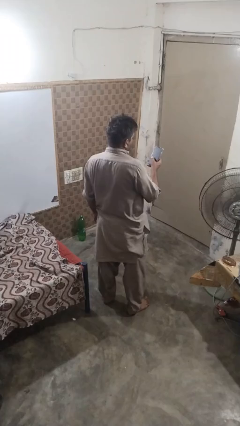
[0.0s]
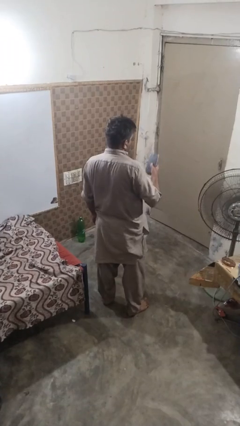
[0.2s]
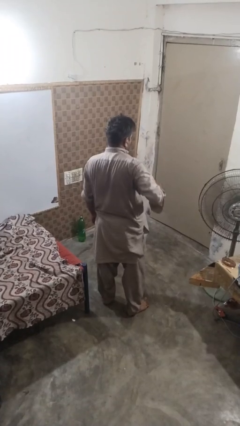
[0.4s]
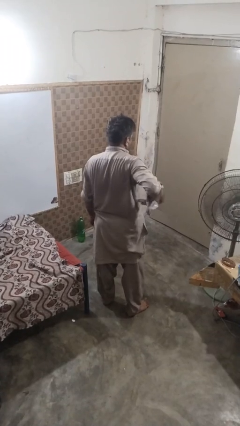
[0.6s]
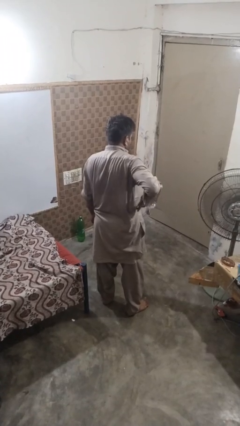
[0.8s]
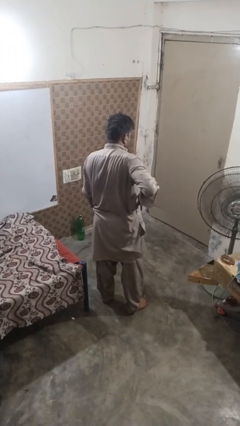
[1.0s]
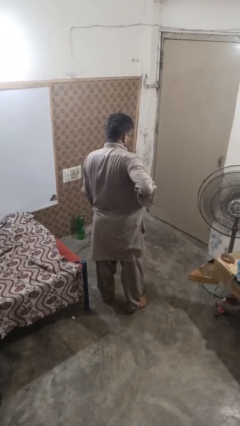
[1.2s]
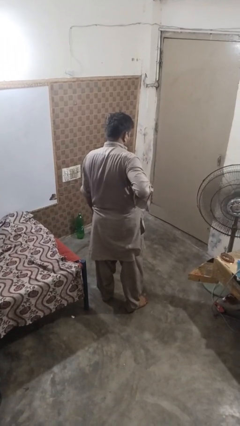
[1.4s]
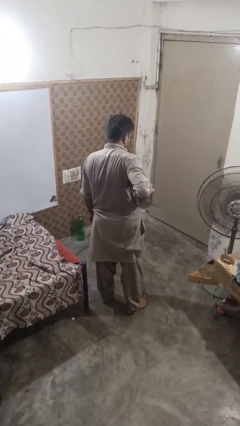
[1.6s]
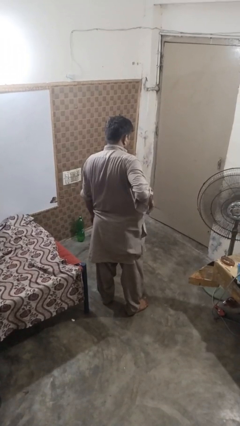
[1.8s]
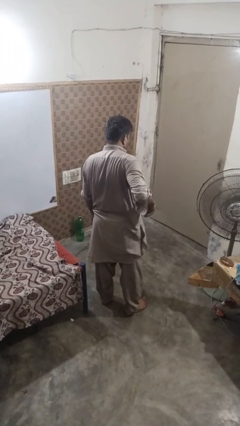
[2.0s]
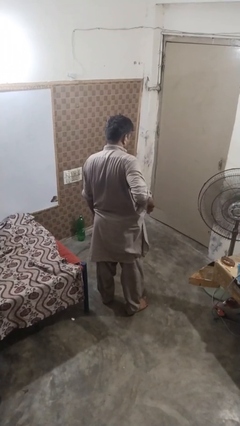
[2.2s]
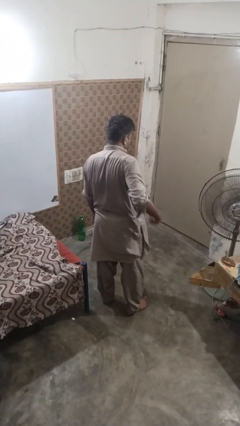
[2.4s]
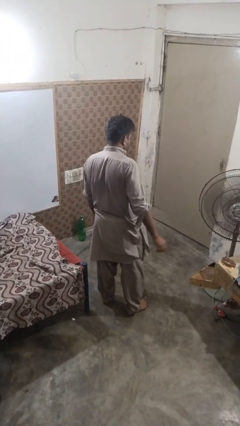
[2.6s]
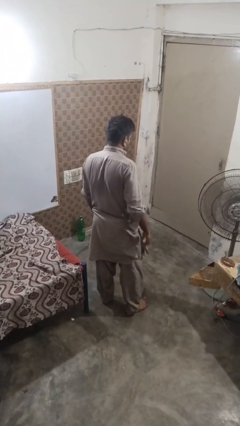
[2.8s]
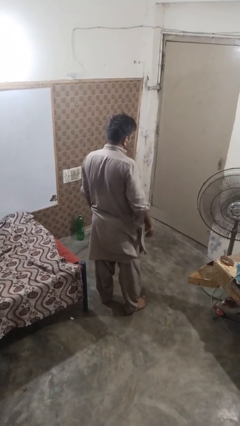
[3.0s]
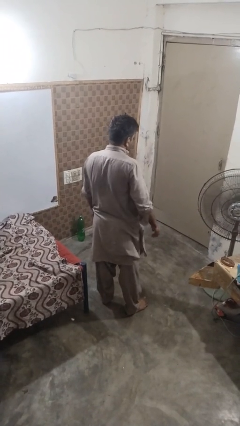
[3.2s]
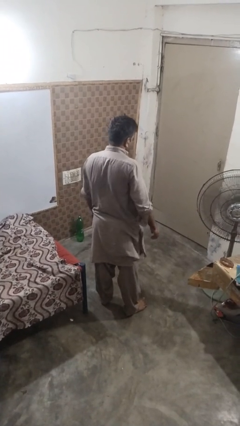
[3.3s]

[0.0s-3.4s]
person puts phone into pocket

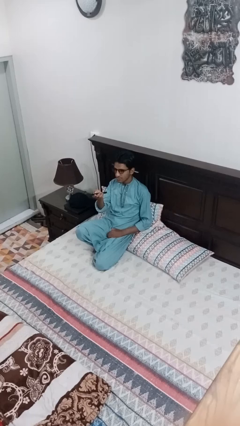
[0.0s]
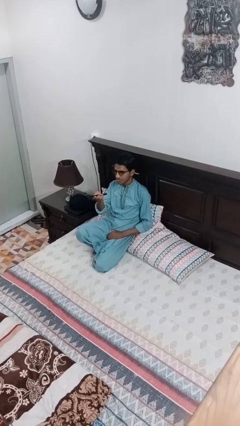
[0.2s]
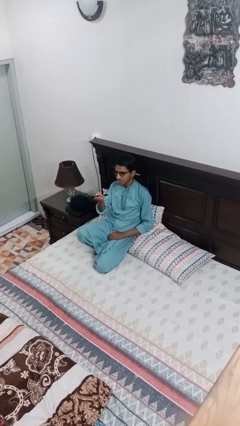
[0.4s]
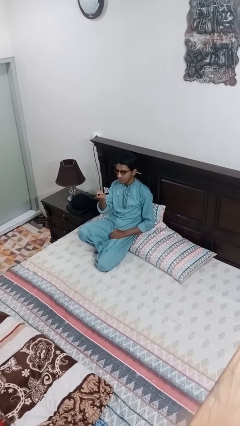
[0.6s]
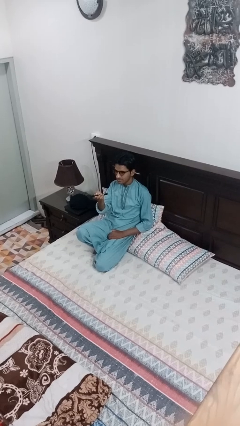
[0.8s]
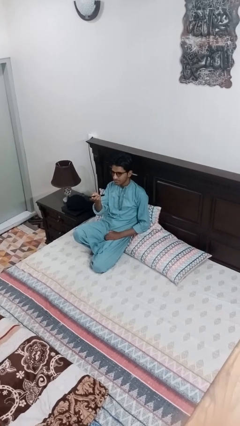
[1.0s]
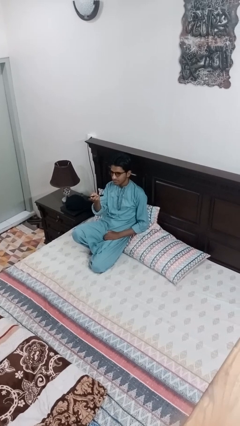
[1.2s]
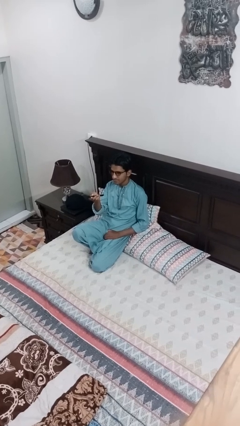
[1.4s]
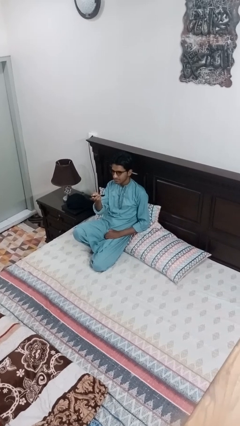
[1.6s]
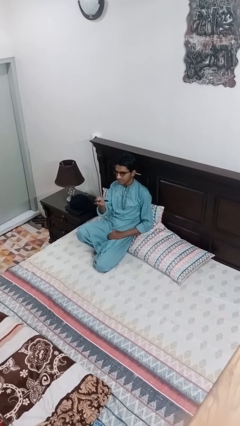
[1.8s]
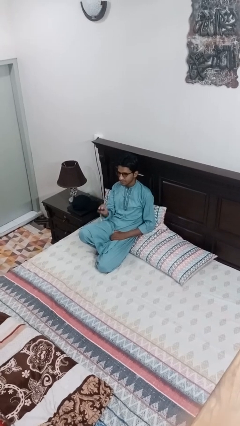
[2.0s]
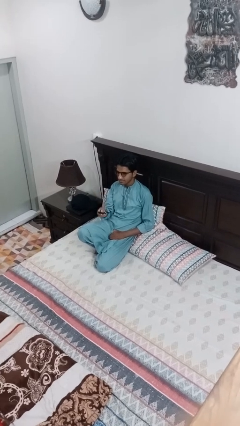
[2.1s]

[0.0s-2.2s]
person uses television remote

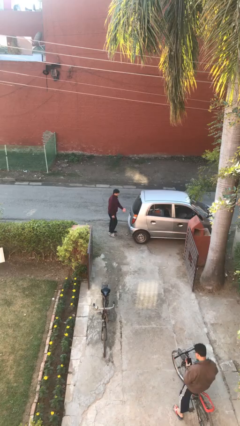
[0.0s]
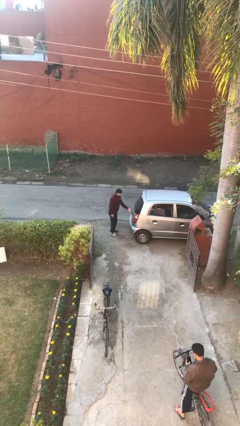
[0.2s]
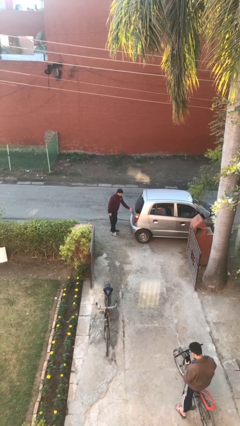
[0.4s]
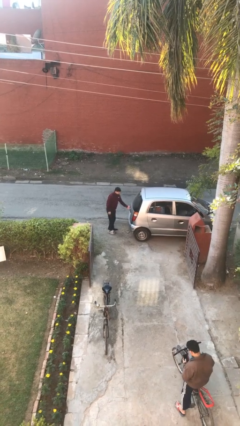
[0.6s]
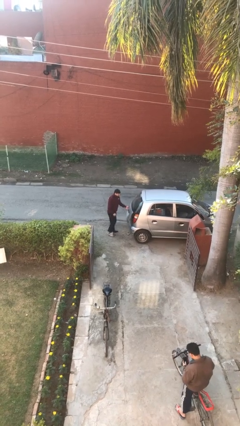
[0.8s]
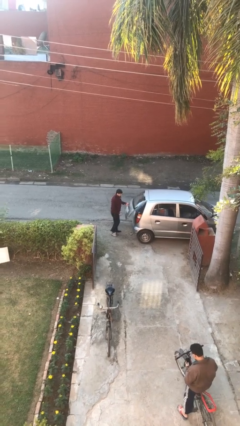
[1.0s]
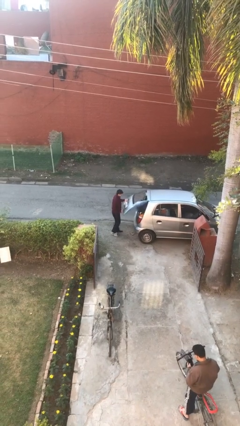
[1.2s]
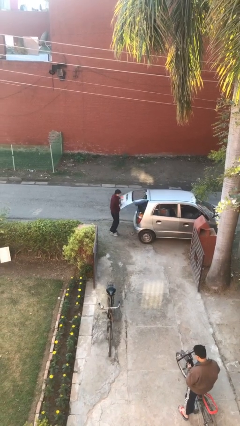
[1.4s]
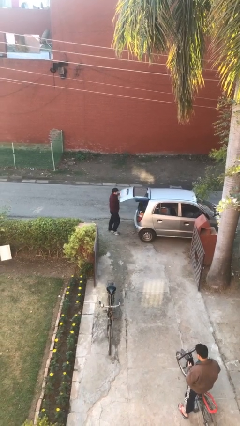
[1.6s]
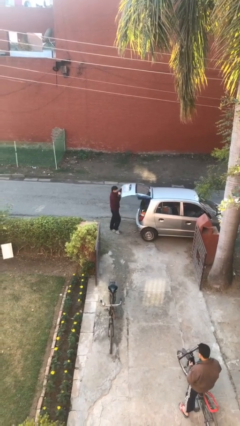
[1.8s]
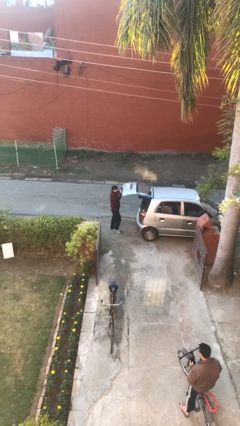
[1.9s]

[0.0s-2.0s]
person opens car trunk

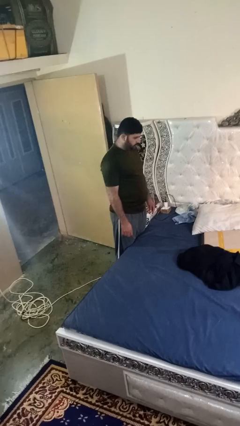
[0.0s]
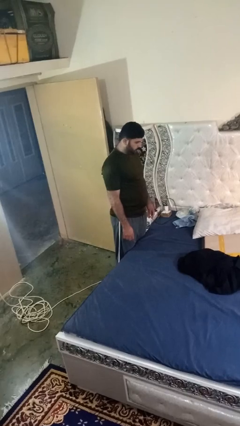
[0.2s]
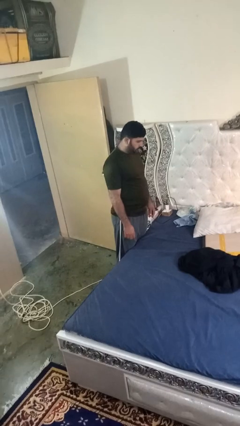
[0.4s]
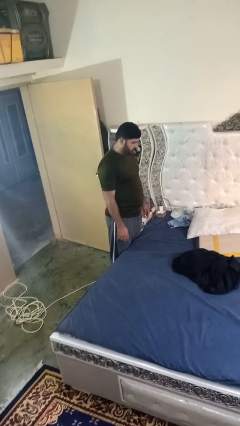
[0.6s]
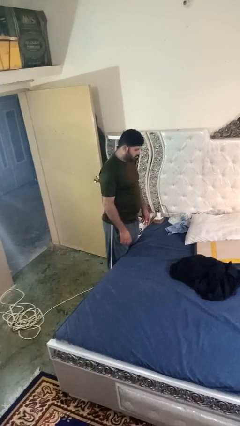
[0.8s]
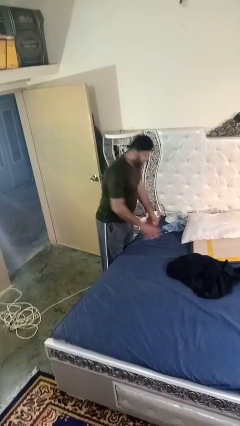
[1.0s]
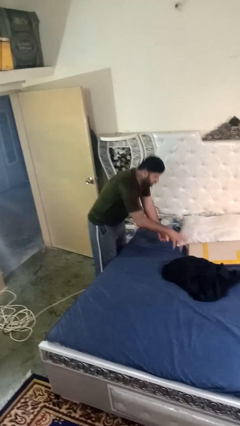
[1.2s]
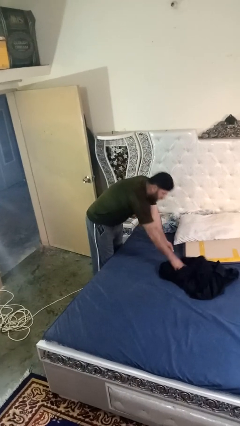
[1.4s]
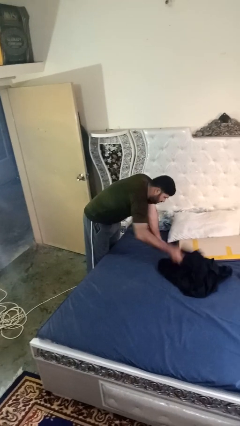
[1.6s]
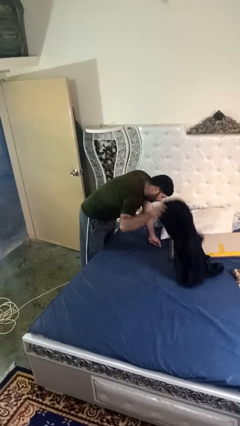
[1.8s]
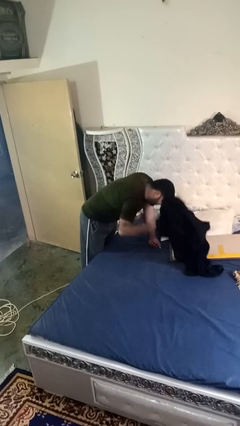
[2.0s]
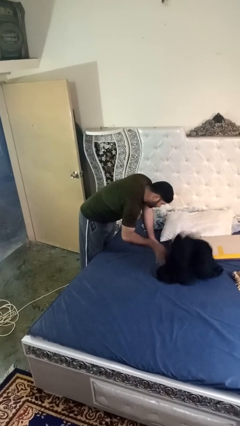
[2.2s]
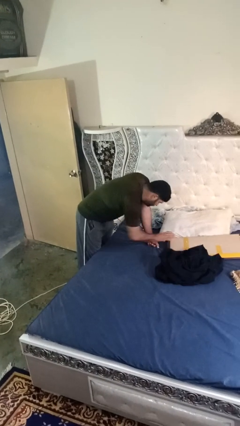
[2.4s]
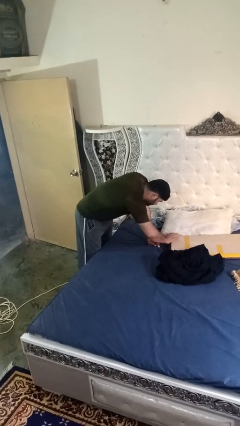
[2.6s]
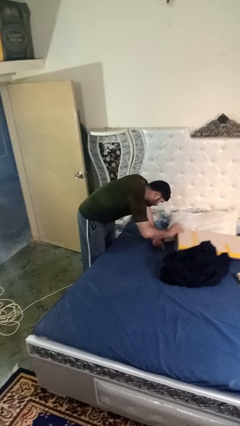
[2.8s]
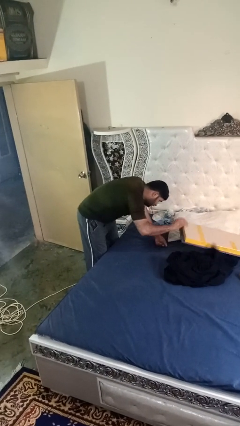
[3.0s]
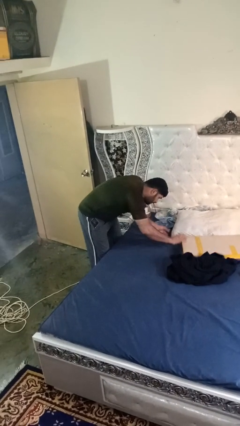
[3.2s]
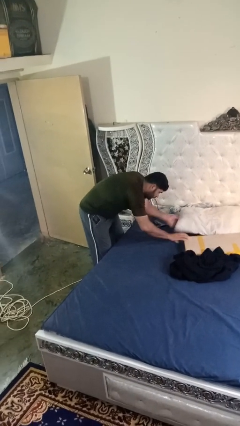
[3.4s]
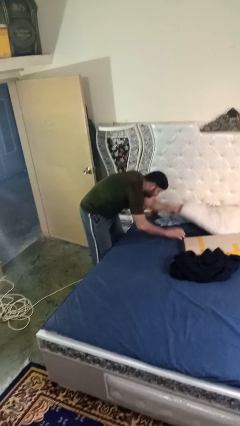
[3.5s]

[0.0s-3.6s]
person searches under bed

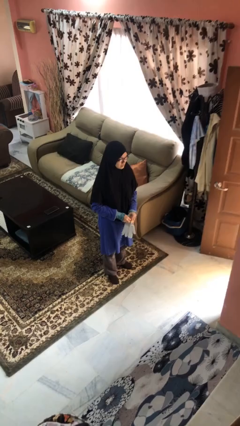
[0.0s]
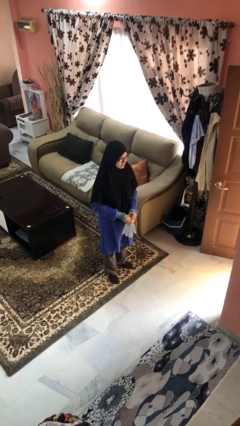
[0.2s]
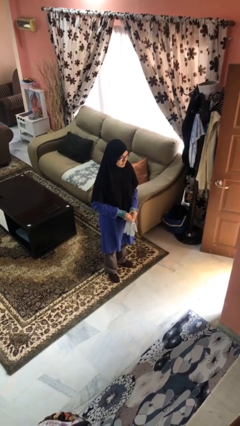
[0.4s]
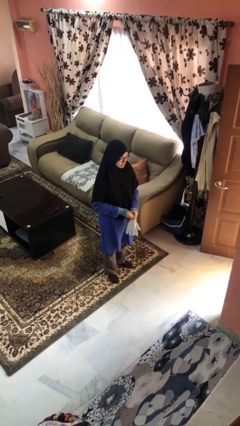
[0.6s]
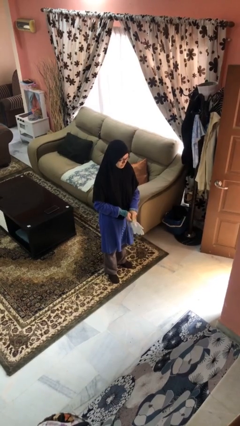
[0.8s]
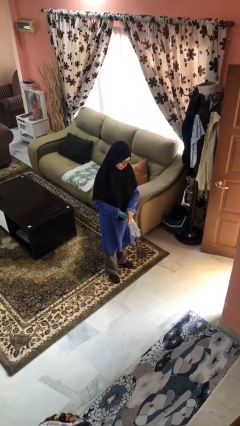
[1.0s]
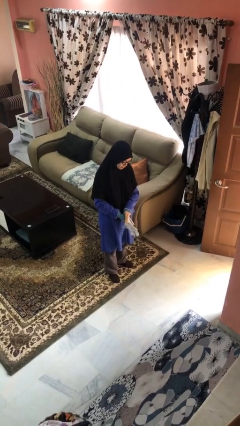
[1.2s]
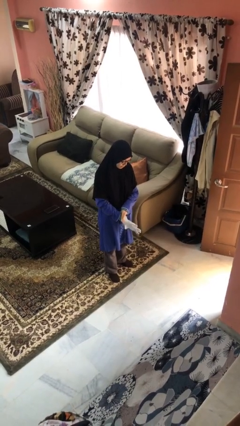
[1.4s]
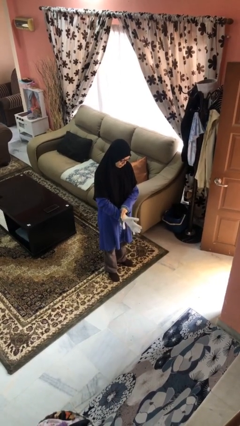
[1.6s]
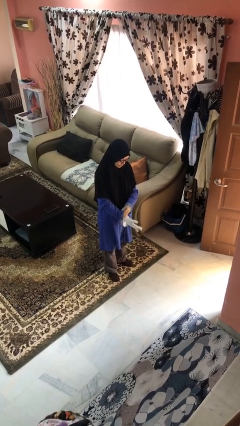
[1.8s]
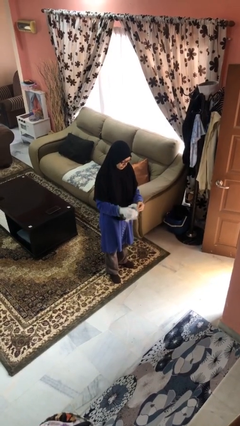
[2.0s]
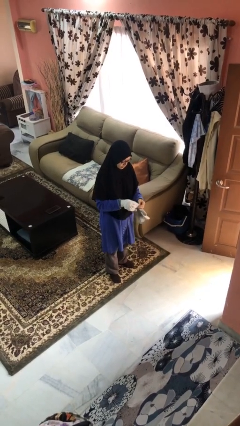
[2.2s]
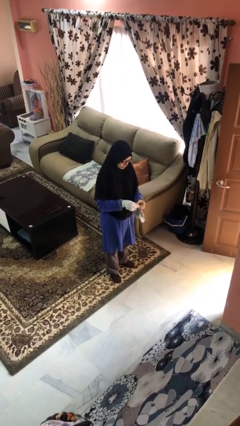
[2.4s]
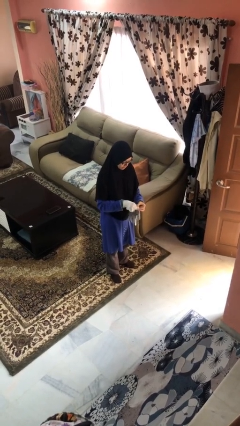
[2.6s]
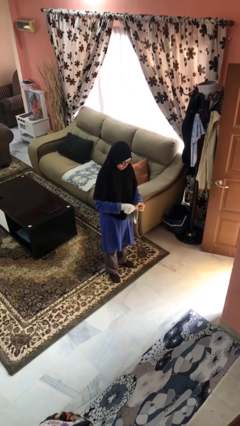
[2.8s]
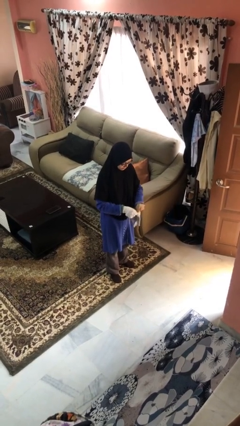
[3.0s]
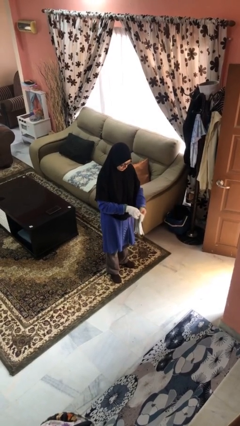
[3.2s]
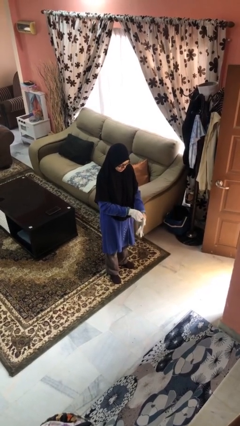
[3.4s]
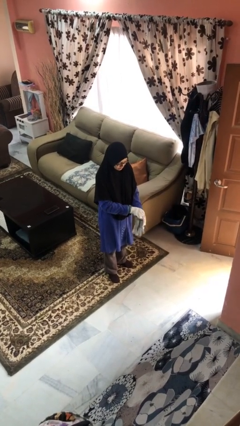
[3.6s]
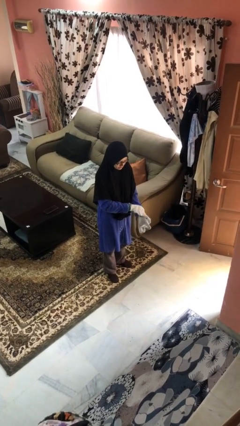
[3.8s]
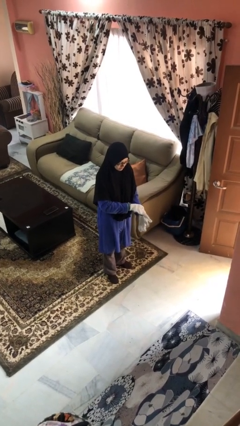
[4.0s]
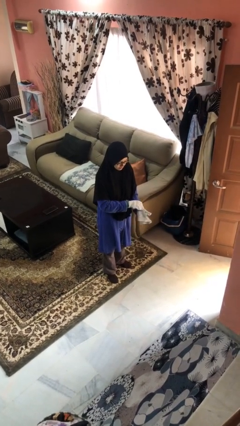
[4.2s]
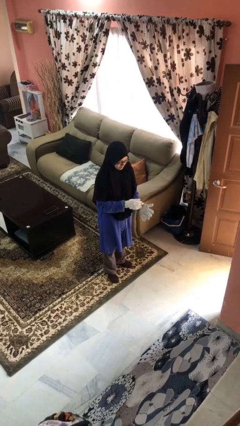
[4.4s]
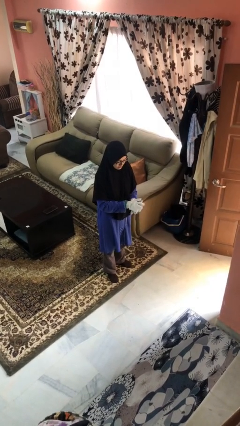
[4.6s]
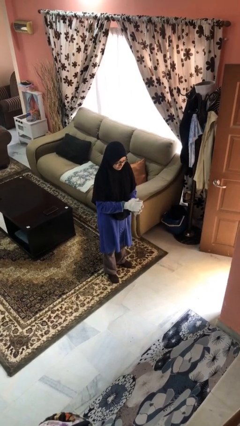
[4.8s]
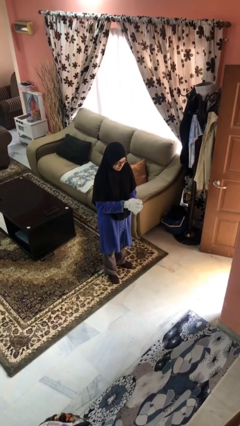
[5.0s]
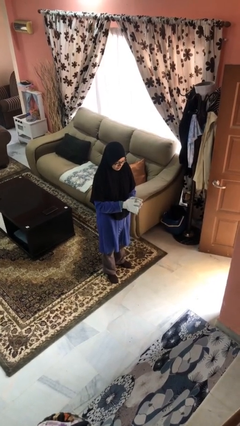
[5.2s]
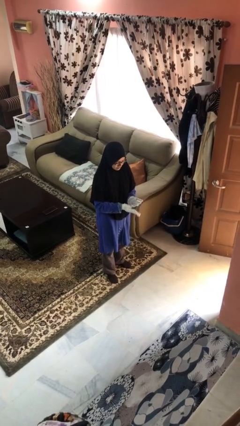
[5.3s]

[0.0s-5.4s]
person puts on gloves

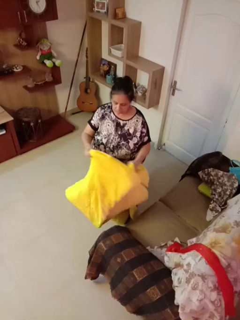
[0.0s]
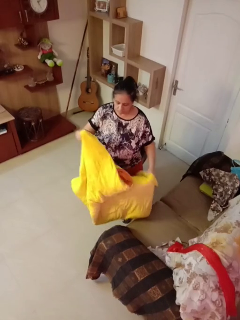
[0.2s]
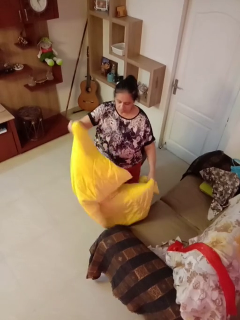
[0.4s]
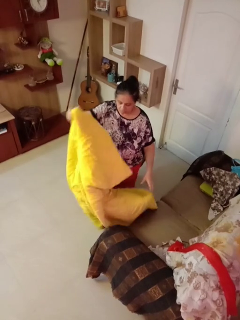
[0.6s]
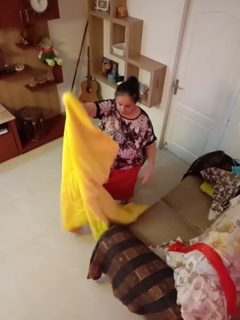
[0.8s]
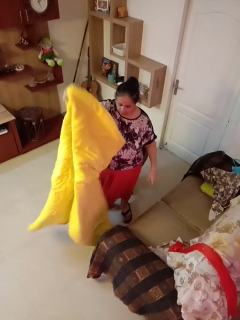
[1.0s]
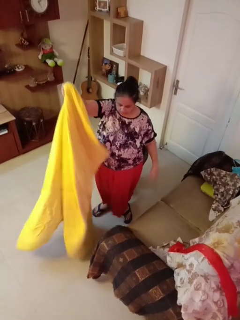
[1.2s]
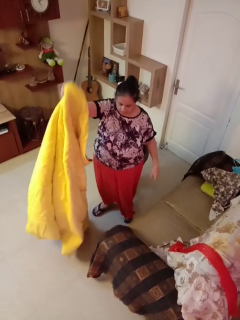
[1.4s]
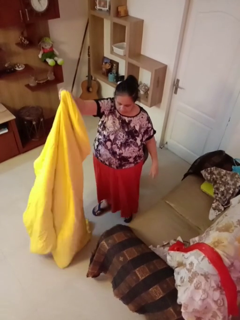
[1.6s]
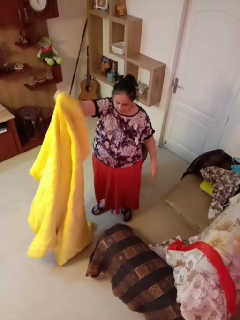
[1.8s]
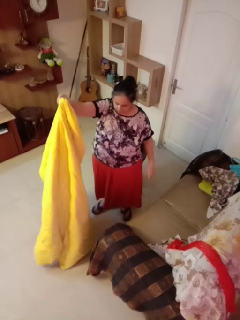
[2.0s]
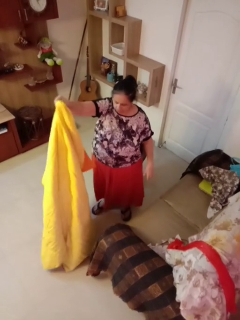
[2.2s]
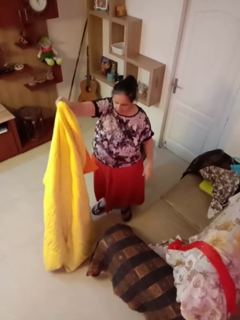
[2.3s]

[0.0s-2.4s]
person unfolds blanket
